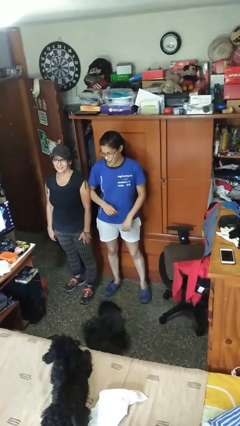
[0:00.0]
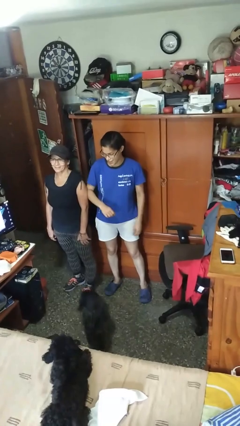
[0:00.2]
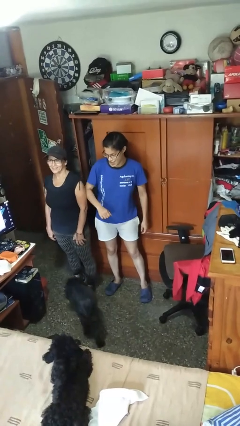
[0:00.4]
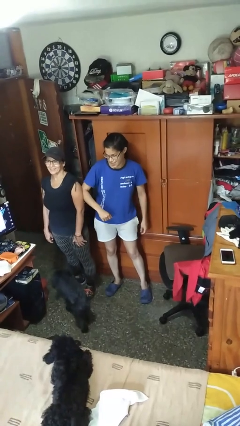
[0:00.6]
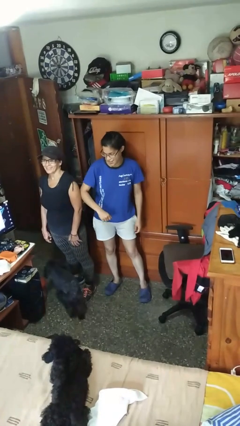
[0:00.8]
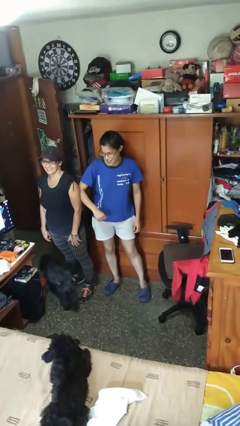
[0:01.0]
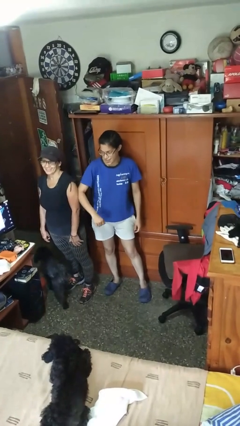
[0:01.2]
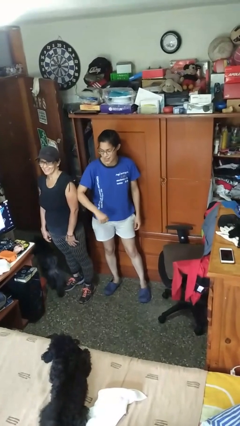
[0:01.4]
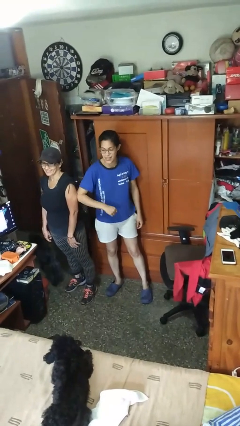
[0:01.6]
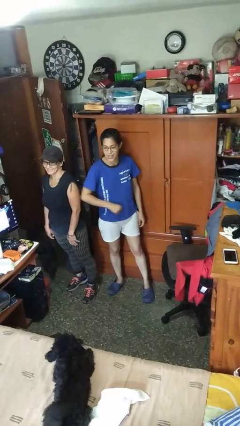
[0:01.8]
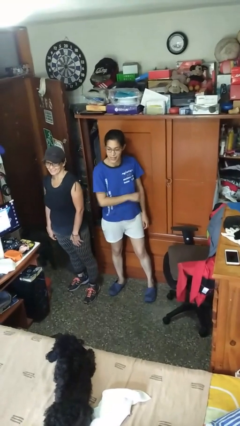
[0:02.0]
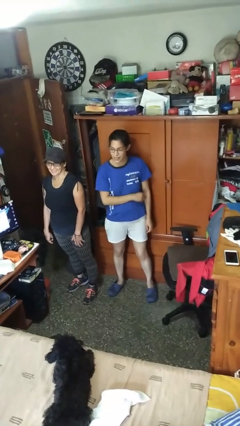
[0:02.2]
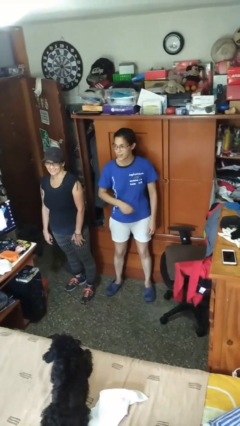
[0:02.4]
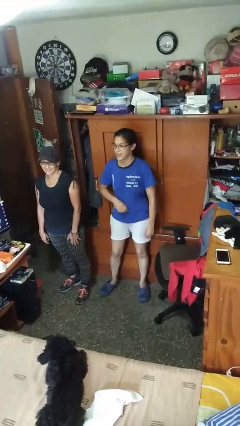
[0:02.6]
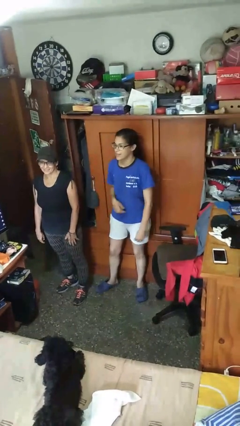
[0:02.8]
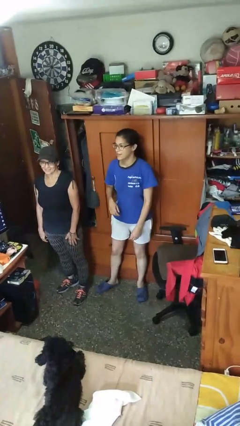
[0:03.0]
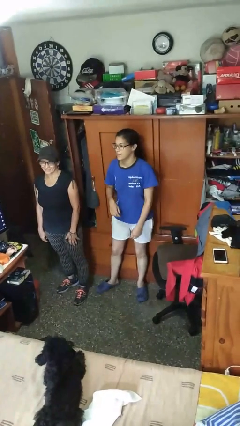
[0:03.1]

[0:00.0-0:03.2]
person nudges person with elbow

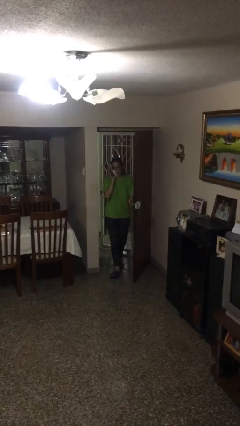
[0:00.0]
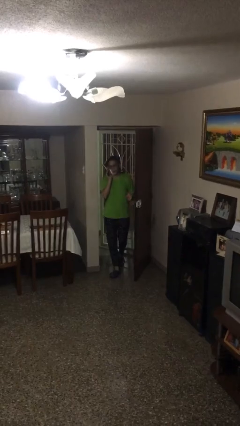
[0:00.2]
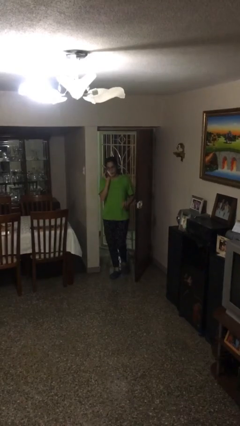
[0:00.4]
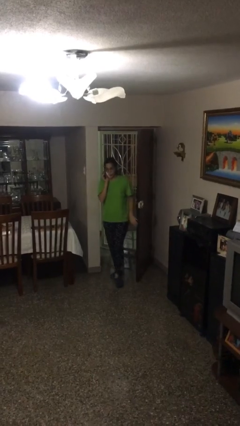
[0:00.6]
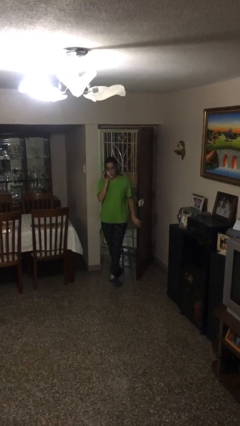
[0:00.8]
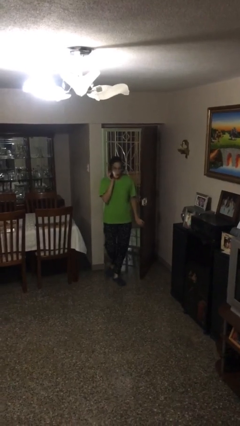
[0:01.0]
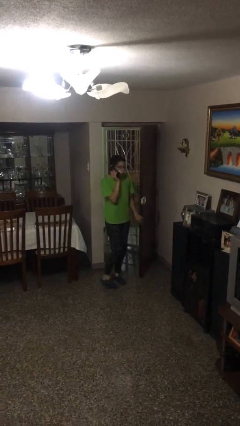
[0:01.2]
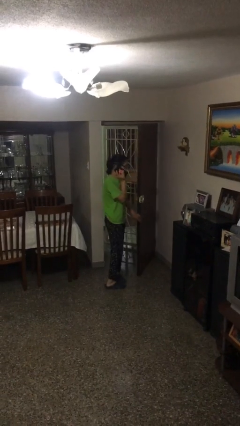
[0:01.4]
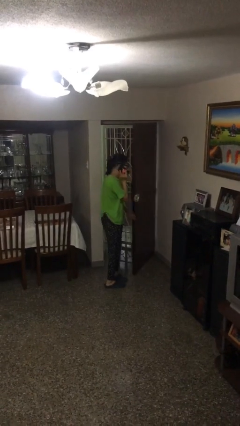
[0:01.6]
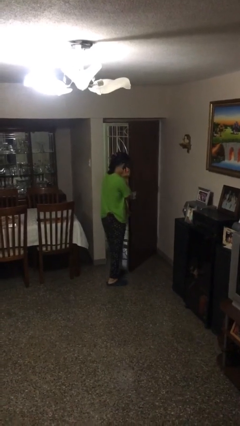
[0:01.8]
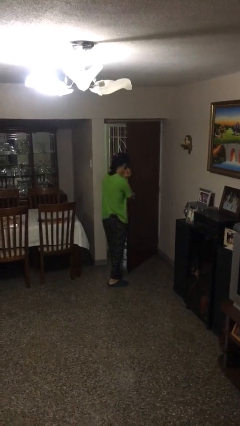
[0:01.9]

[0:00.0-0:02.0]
person enters scene through structure

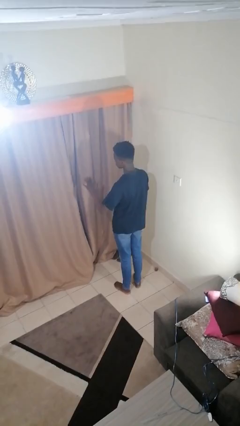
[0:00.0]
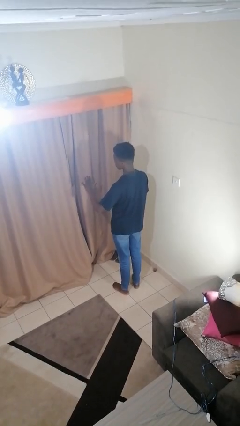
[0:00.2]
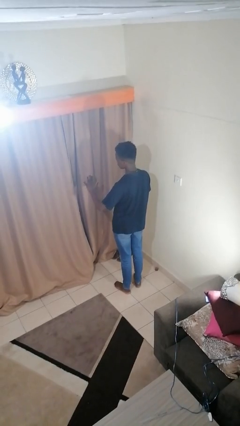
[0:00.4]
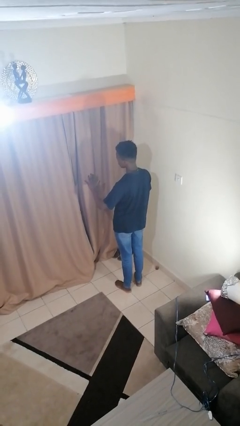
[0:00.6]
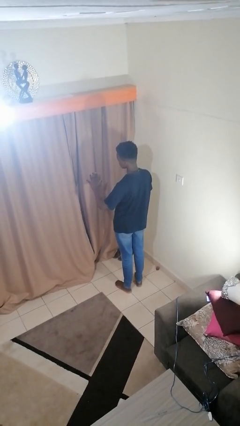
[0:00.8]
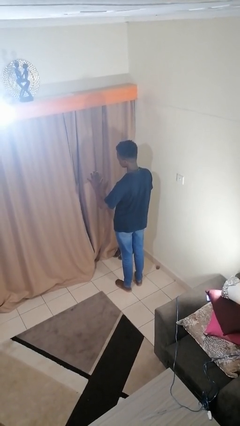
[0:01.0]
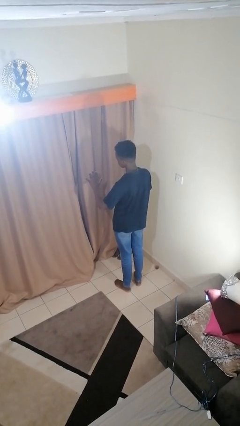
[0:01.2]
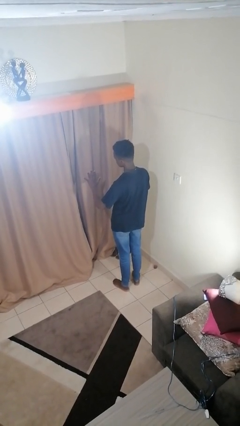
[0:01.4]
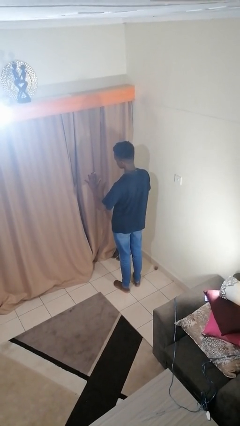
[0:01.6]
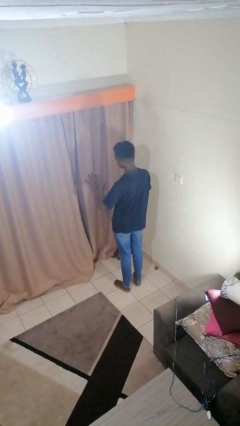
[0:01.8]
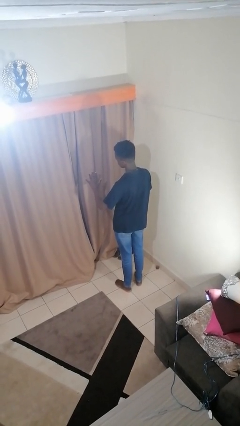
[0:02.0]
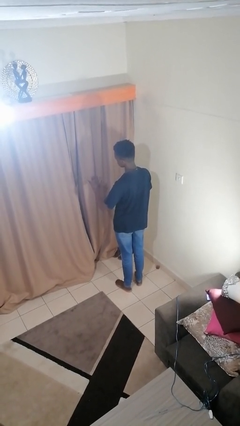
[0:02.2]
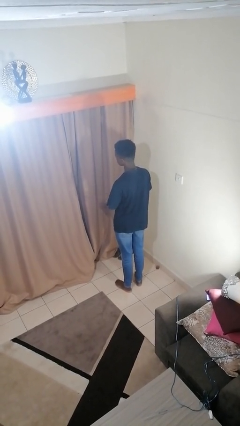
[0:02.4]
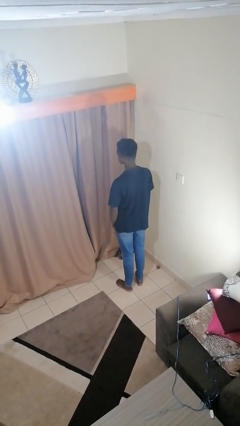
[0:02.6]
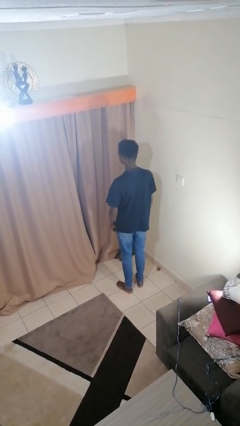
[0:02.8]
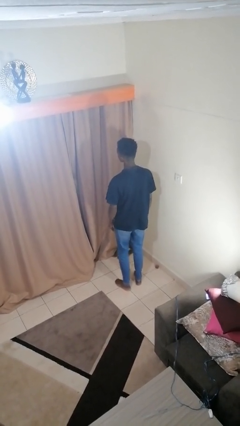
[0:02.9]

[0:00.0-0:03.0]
person gestures number five

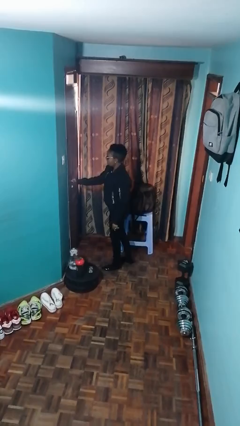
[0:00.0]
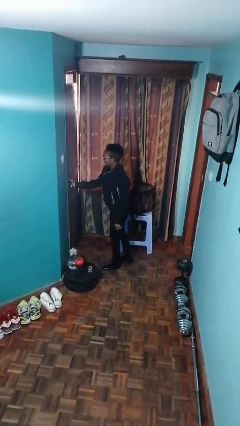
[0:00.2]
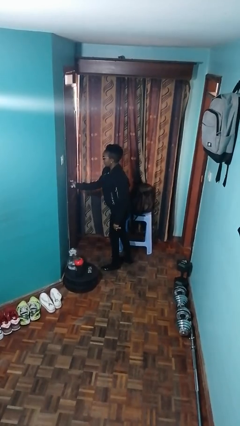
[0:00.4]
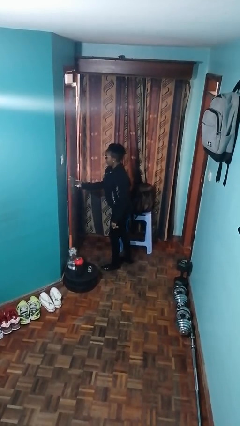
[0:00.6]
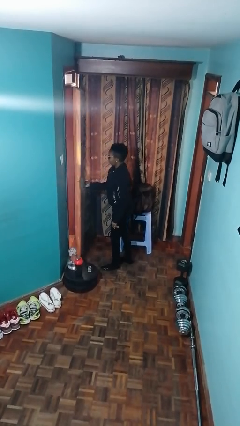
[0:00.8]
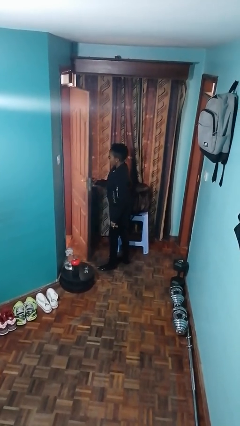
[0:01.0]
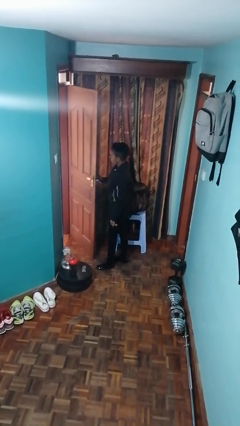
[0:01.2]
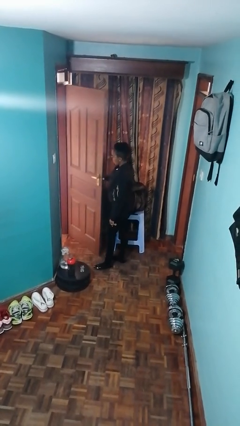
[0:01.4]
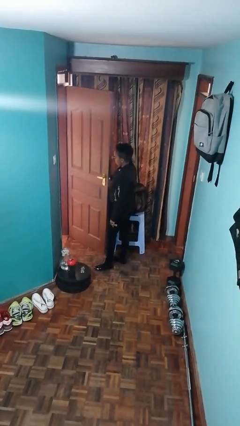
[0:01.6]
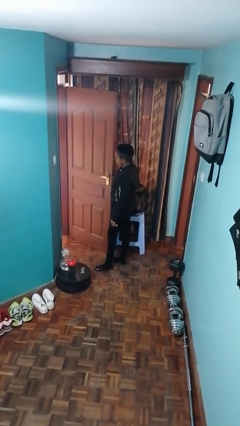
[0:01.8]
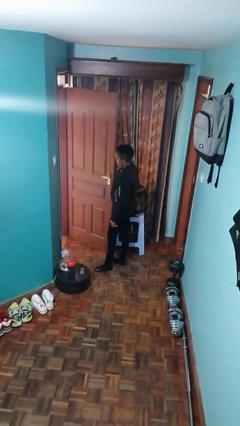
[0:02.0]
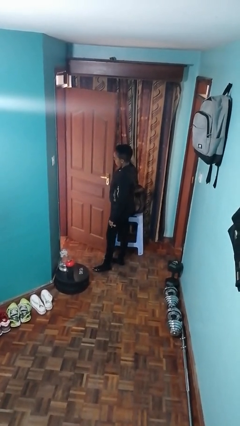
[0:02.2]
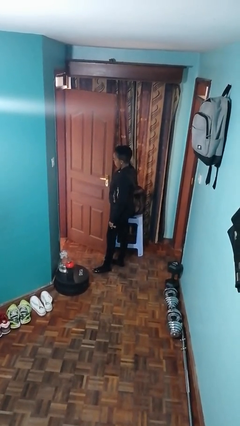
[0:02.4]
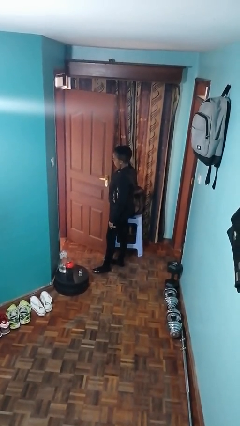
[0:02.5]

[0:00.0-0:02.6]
person opens facility door

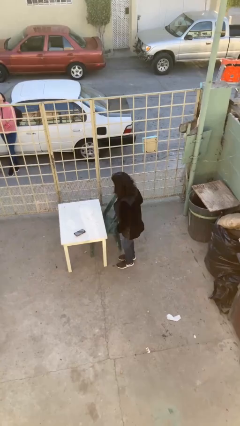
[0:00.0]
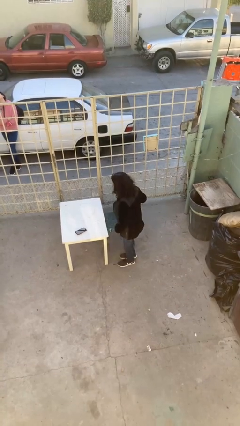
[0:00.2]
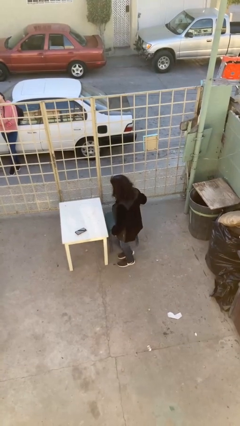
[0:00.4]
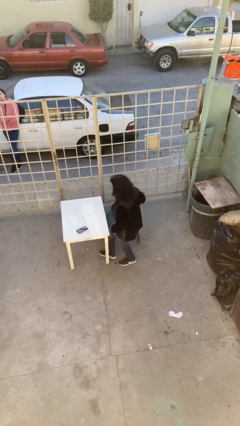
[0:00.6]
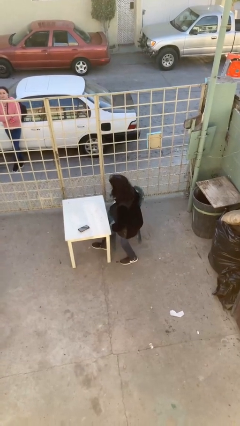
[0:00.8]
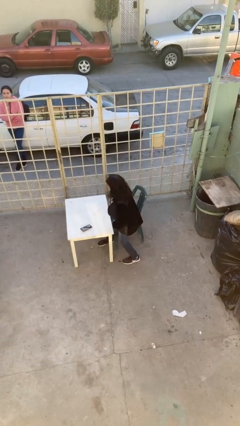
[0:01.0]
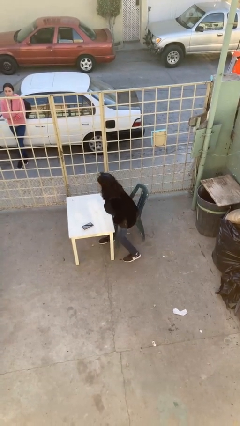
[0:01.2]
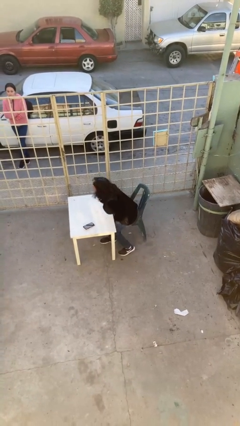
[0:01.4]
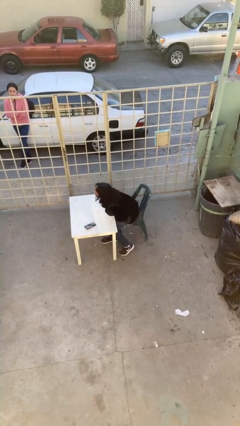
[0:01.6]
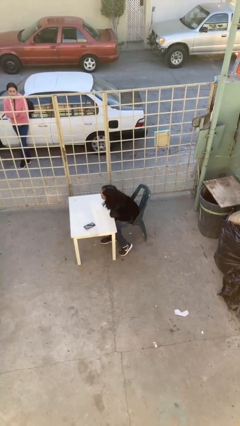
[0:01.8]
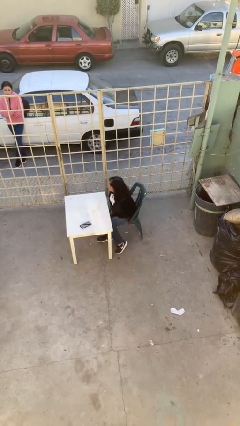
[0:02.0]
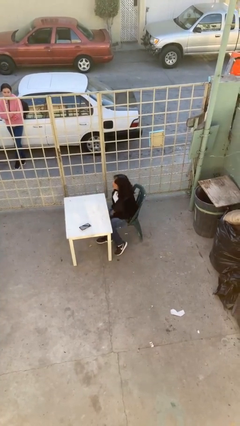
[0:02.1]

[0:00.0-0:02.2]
person sits down

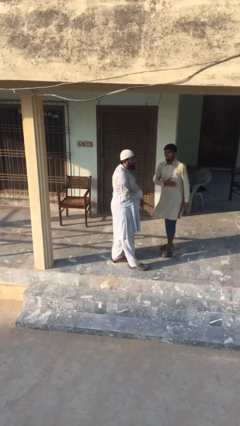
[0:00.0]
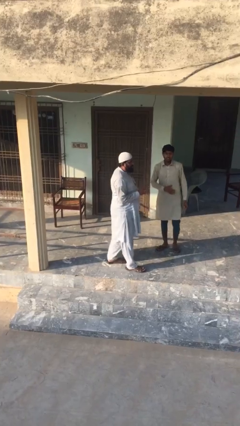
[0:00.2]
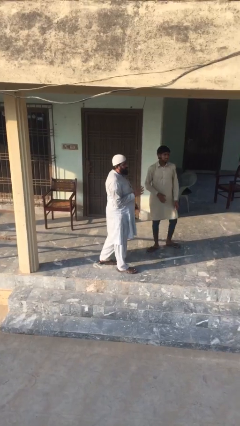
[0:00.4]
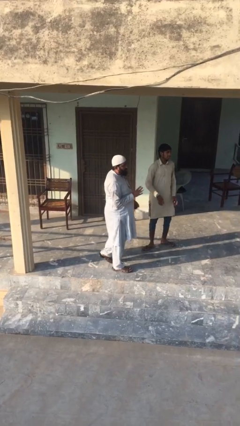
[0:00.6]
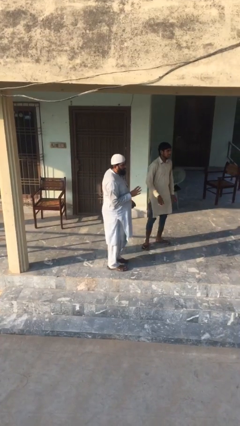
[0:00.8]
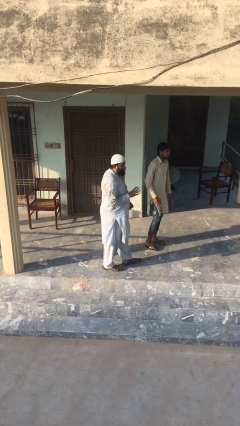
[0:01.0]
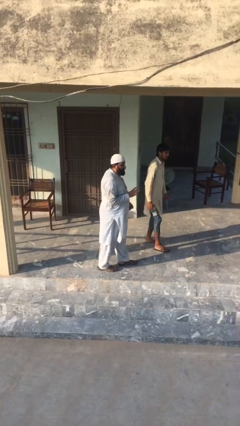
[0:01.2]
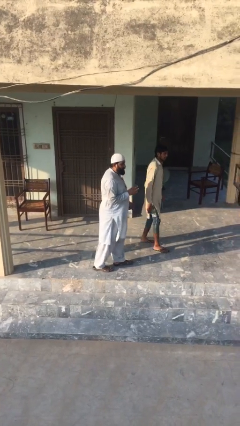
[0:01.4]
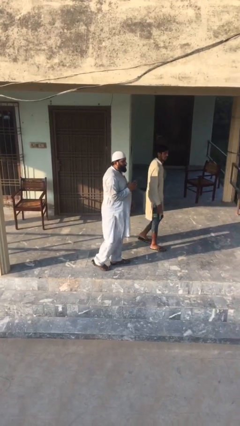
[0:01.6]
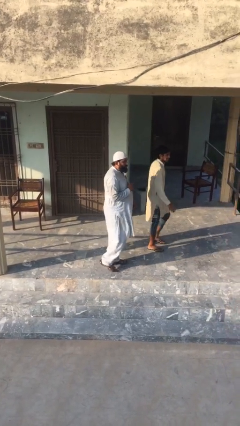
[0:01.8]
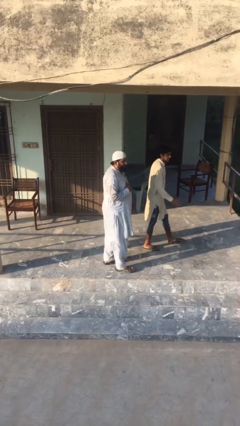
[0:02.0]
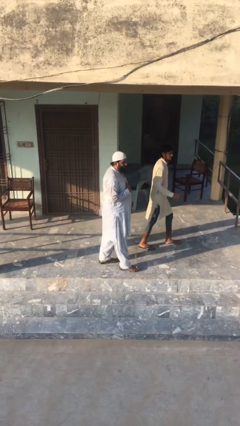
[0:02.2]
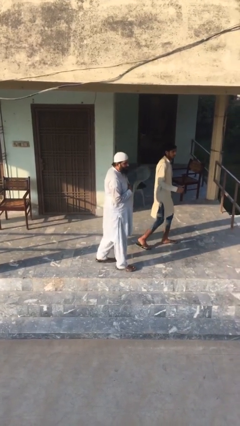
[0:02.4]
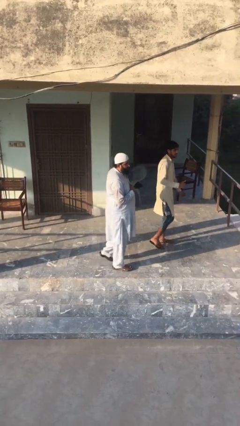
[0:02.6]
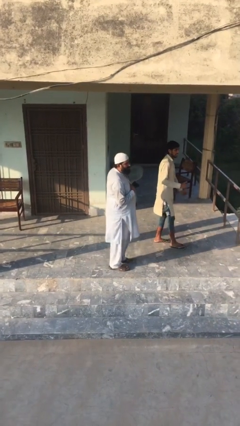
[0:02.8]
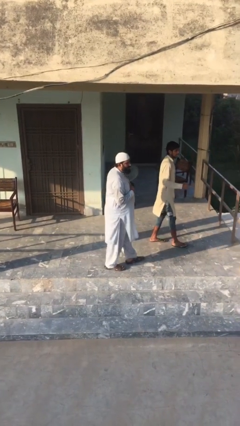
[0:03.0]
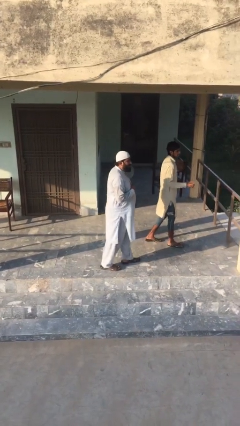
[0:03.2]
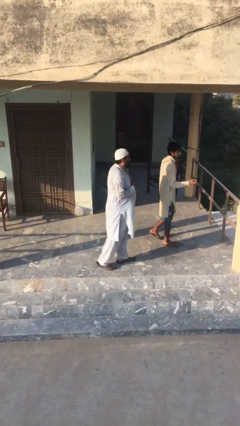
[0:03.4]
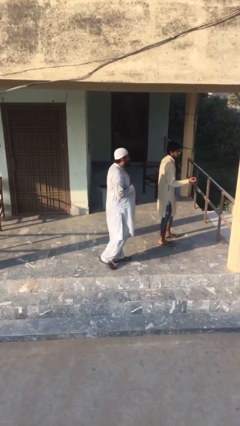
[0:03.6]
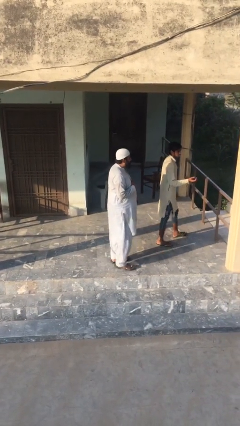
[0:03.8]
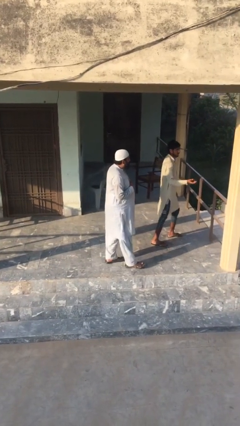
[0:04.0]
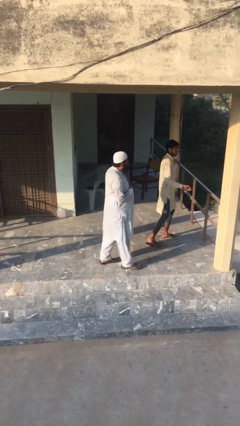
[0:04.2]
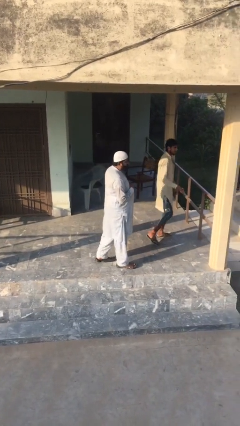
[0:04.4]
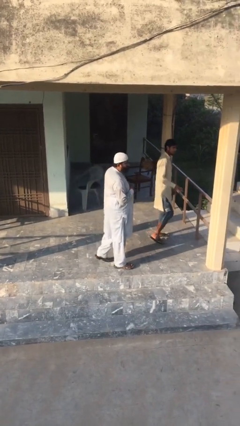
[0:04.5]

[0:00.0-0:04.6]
person talks to person
